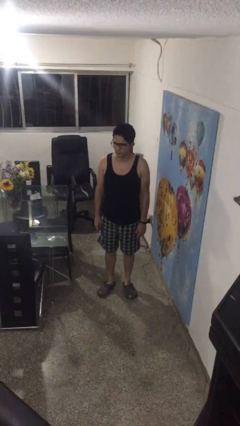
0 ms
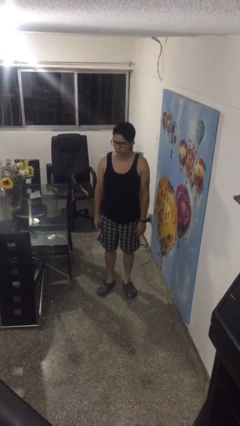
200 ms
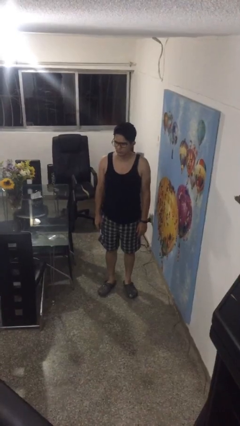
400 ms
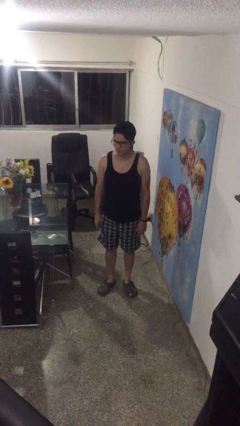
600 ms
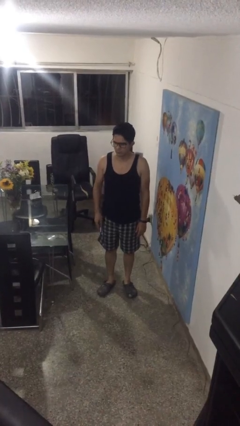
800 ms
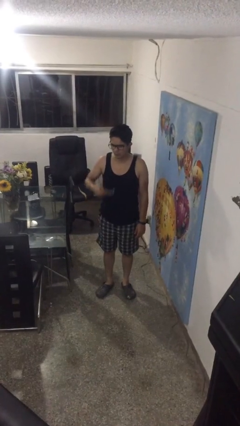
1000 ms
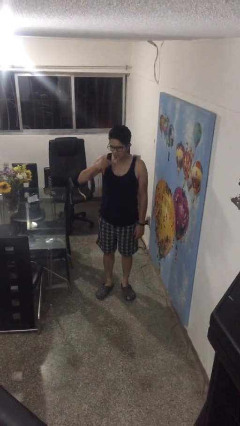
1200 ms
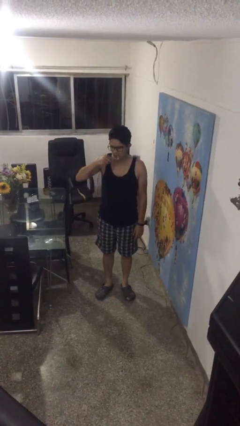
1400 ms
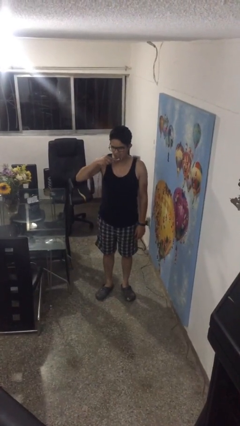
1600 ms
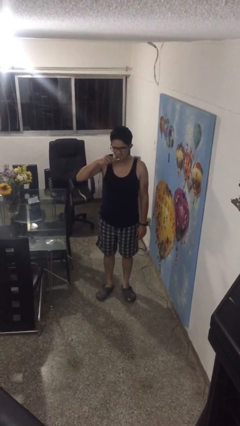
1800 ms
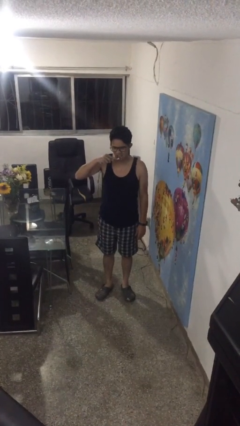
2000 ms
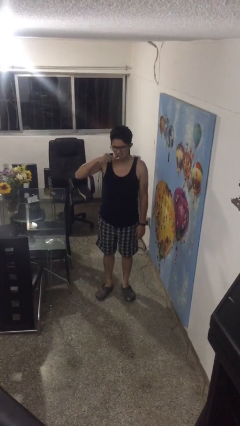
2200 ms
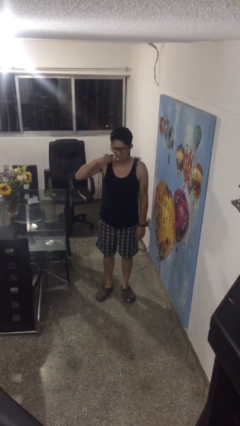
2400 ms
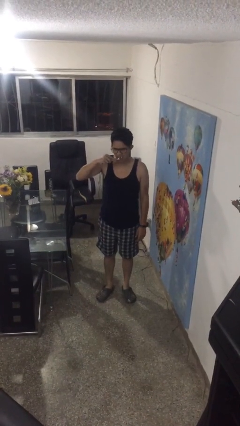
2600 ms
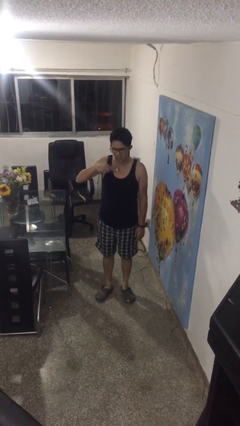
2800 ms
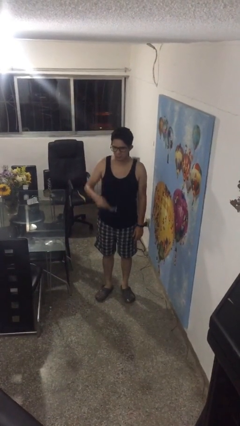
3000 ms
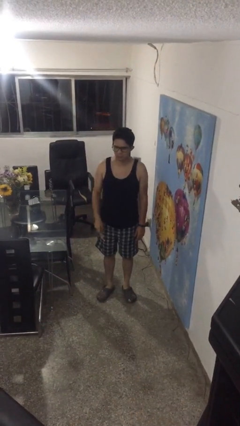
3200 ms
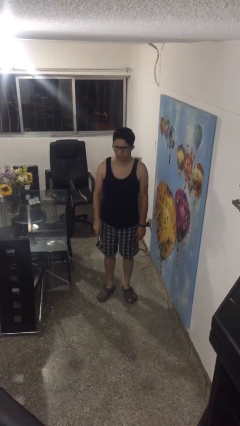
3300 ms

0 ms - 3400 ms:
person brushes teeth

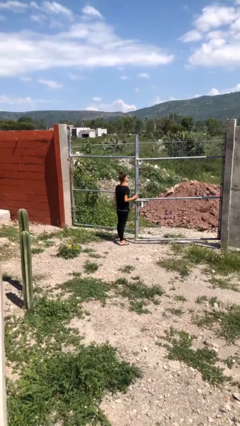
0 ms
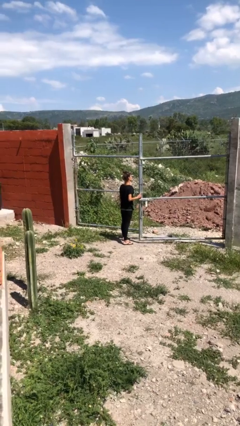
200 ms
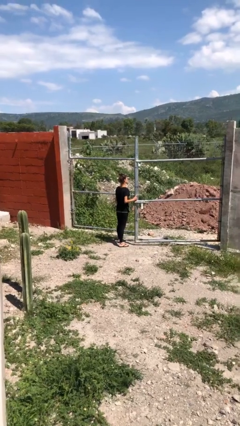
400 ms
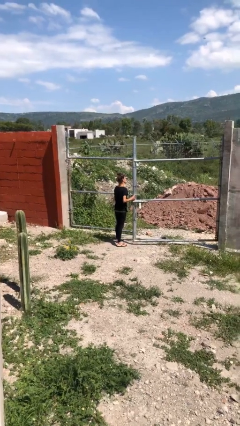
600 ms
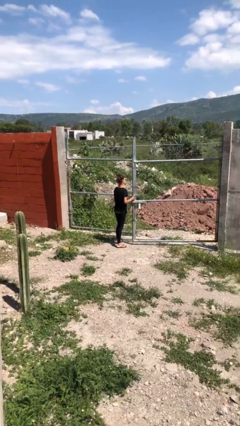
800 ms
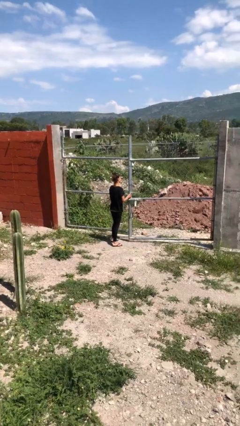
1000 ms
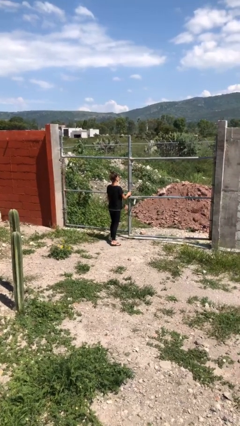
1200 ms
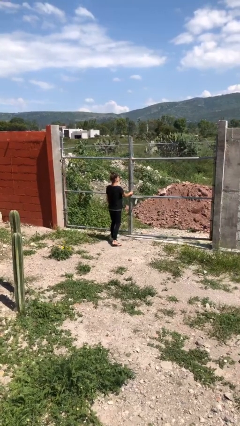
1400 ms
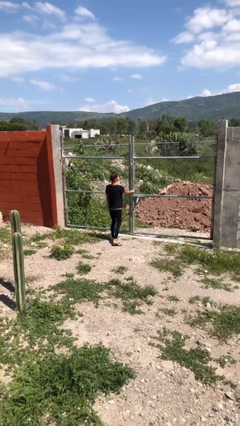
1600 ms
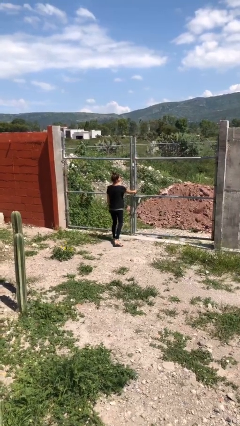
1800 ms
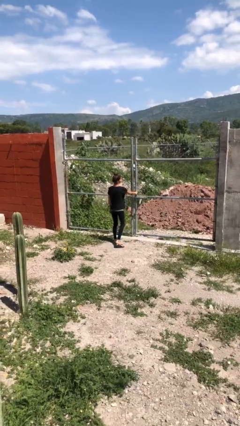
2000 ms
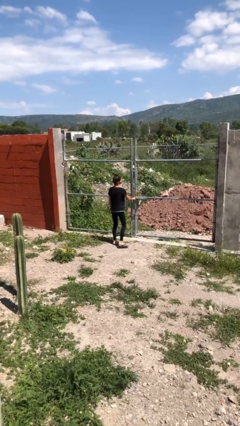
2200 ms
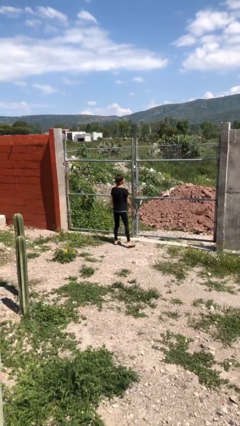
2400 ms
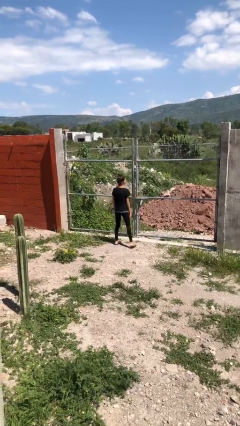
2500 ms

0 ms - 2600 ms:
person closes gate

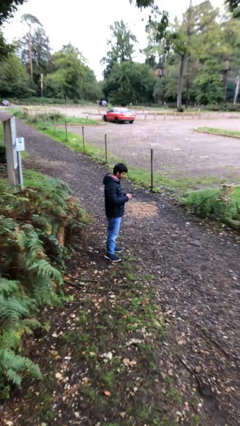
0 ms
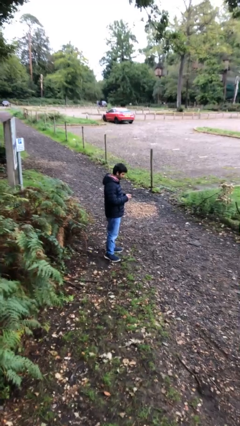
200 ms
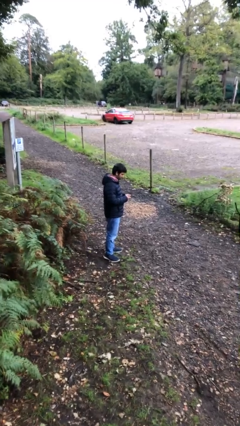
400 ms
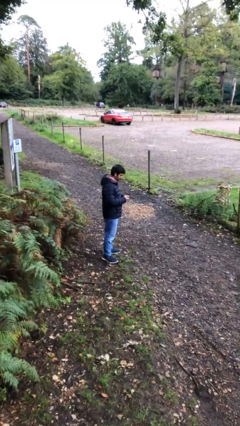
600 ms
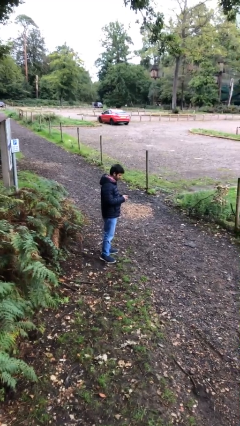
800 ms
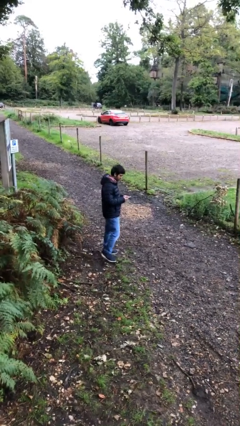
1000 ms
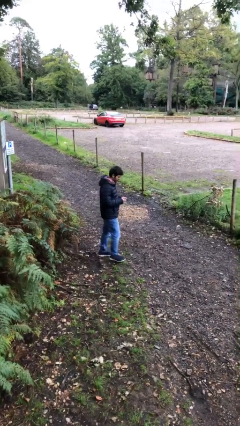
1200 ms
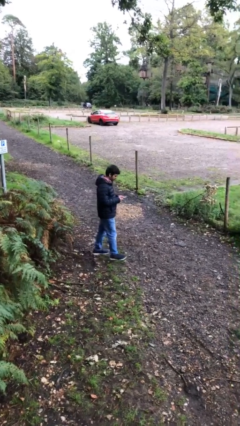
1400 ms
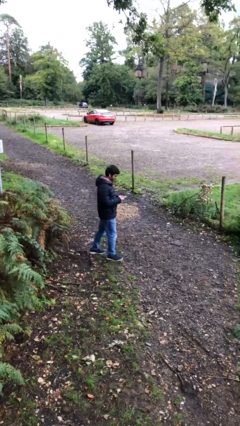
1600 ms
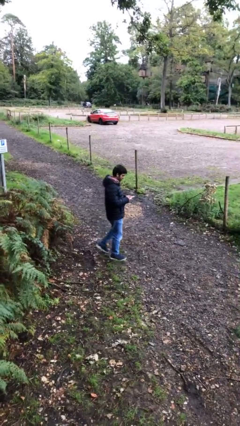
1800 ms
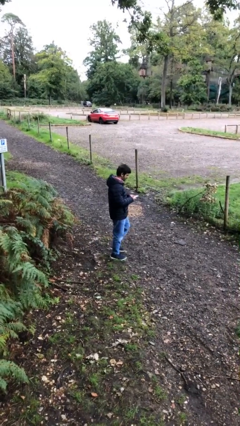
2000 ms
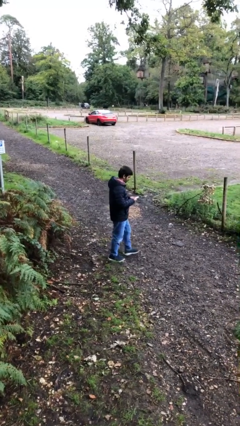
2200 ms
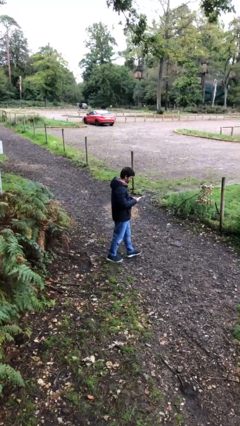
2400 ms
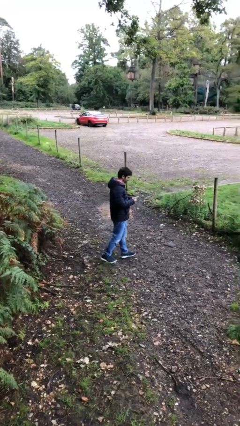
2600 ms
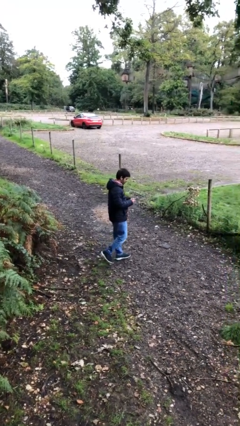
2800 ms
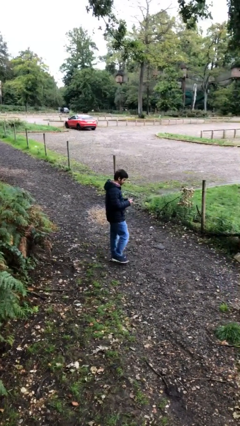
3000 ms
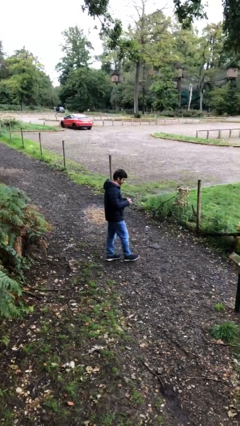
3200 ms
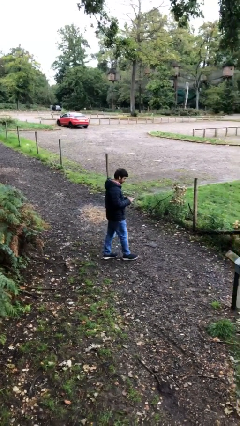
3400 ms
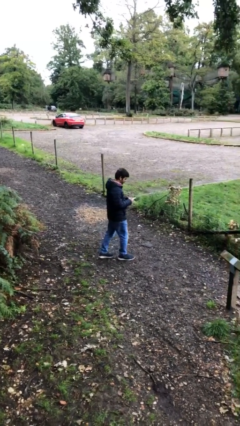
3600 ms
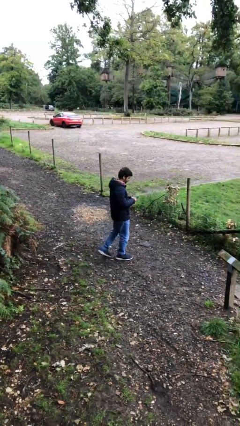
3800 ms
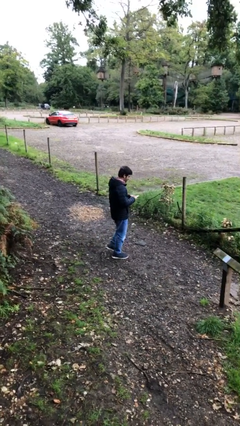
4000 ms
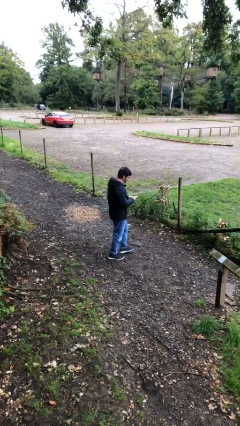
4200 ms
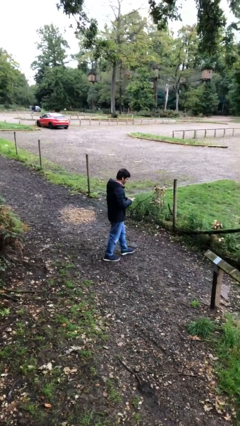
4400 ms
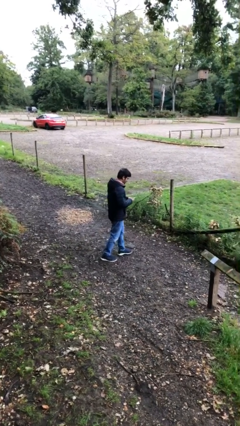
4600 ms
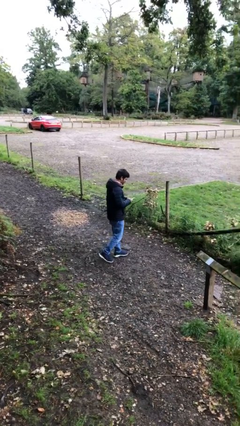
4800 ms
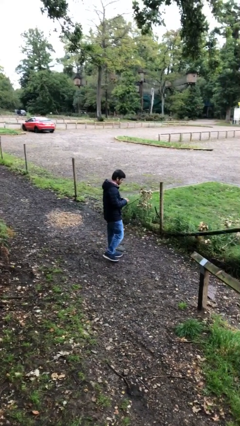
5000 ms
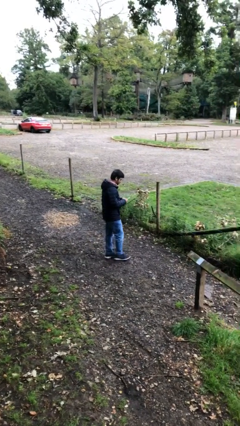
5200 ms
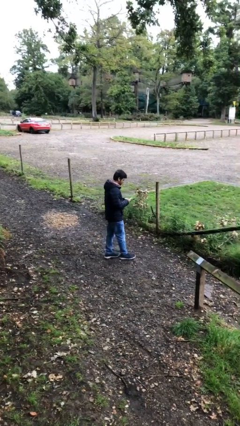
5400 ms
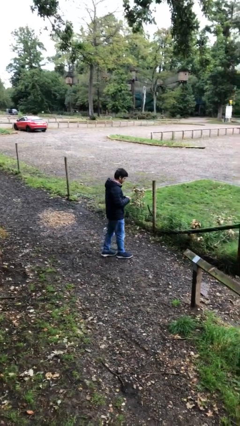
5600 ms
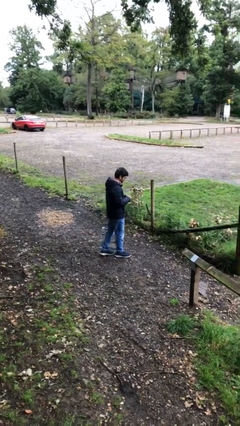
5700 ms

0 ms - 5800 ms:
person texts on phone

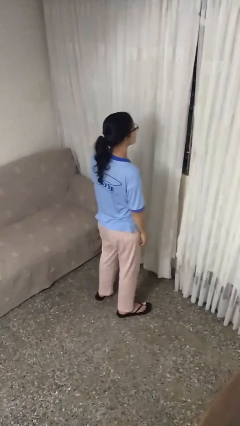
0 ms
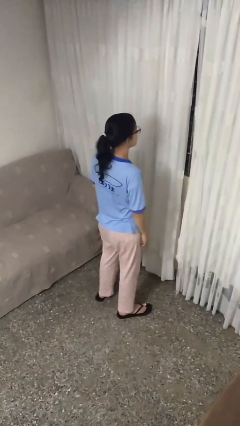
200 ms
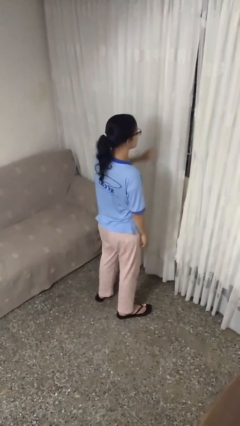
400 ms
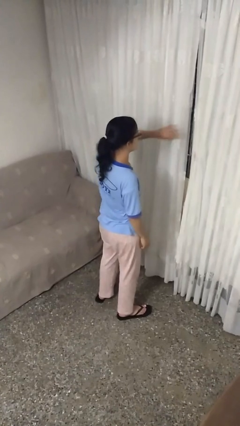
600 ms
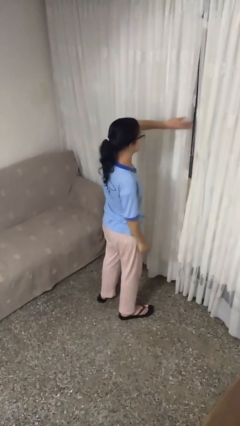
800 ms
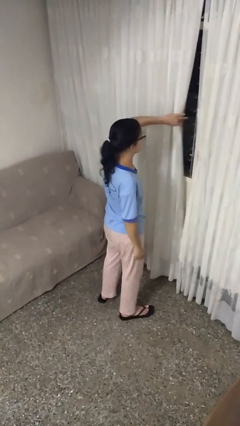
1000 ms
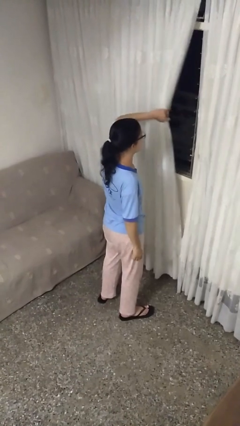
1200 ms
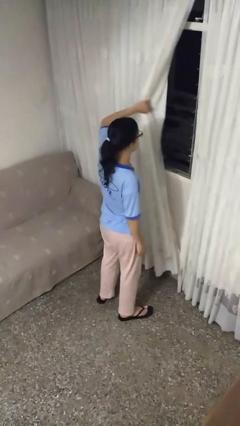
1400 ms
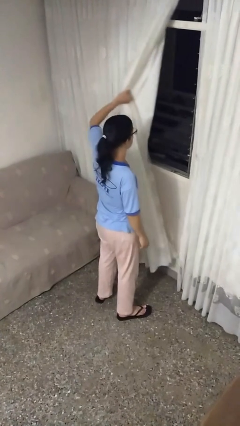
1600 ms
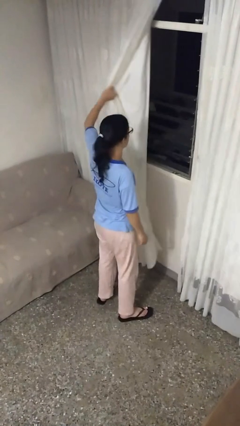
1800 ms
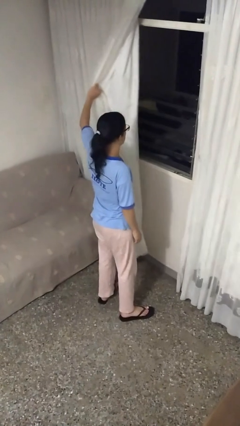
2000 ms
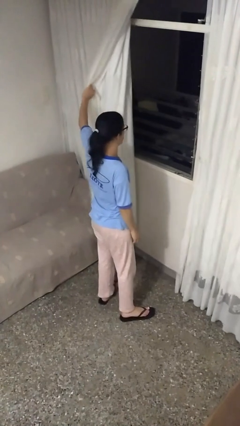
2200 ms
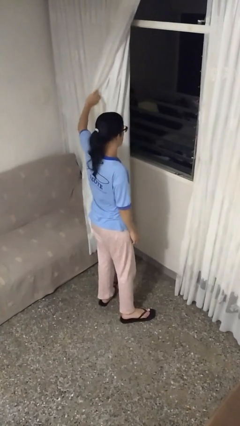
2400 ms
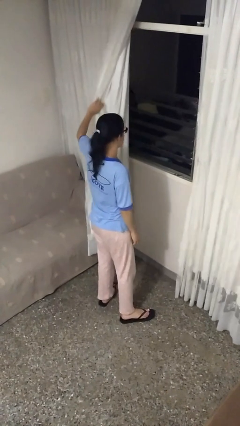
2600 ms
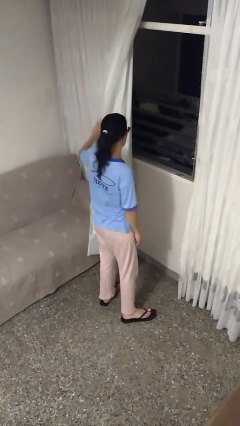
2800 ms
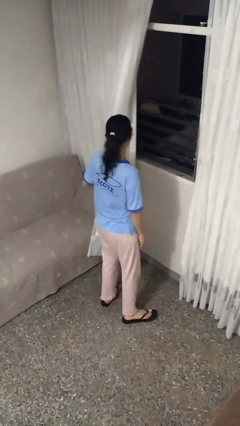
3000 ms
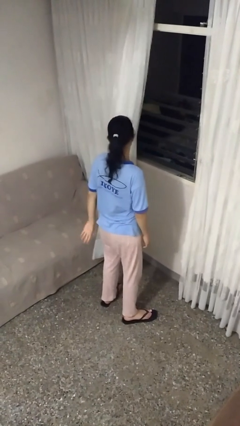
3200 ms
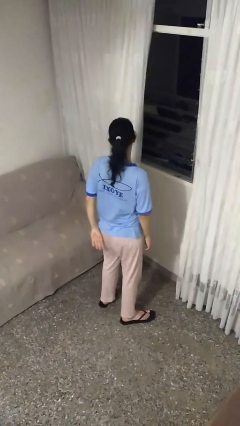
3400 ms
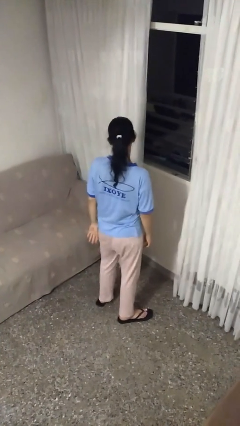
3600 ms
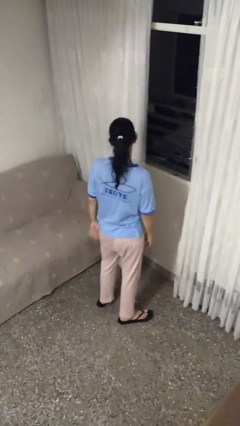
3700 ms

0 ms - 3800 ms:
person opens curtains

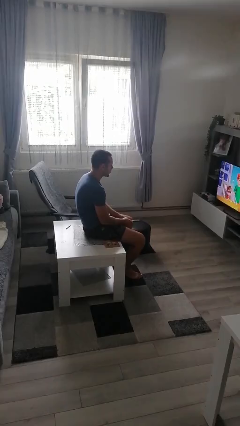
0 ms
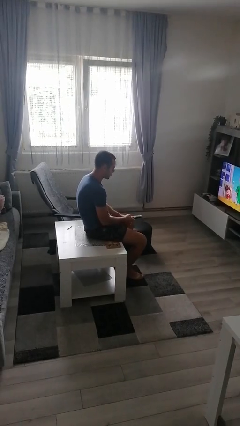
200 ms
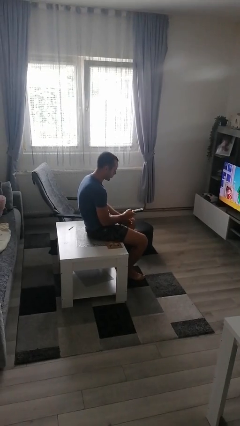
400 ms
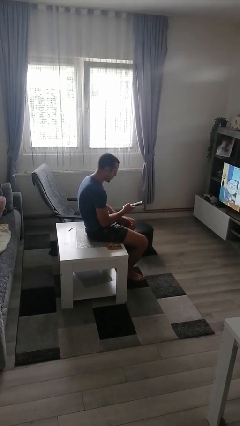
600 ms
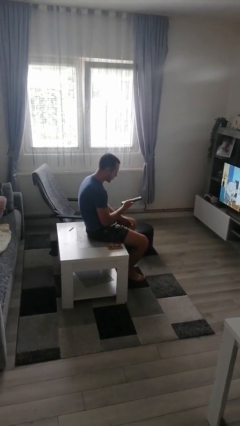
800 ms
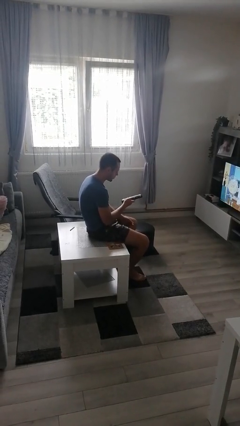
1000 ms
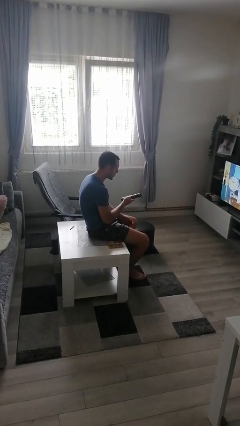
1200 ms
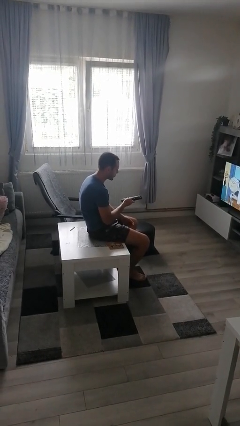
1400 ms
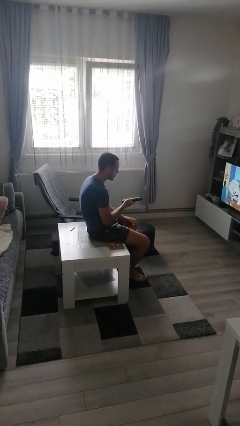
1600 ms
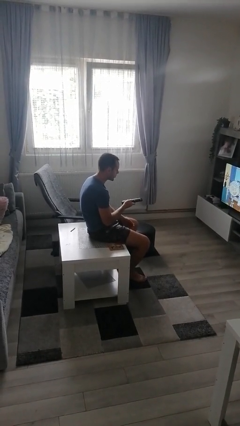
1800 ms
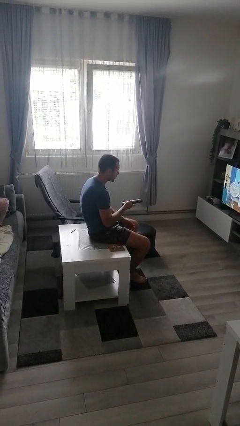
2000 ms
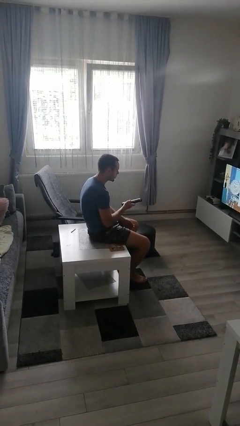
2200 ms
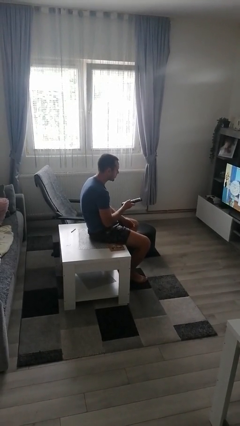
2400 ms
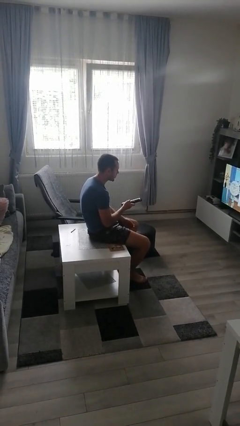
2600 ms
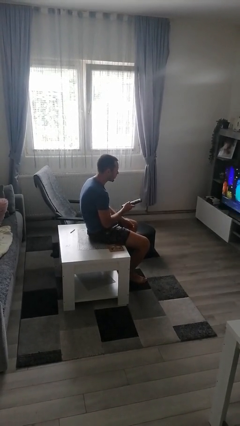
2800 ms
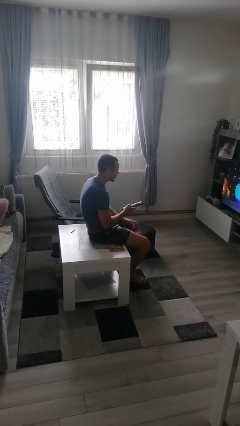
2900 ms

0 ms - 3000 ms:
person uses television remote
